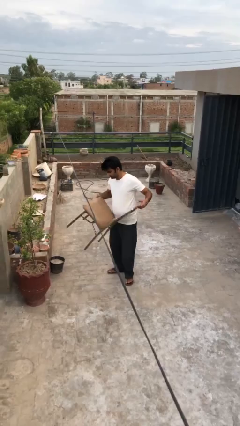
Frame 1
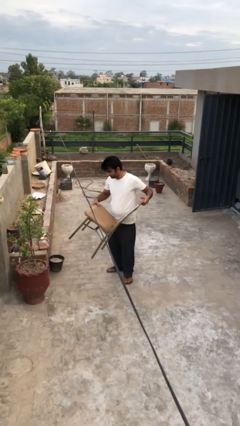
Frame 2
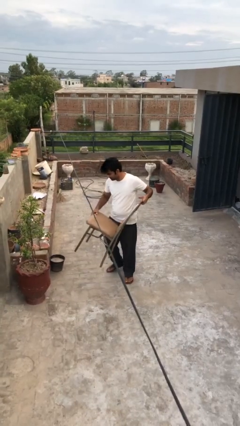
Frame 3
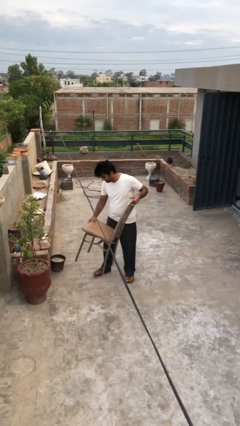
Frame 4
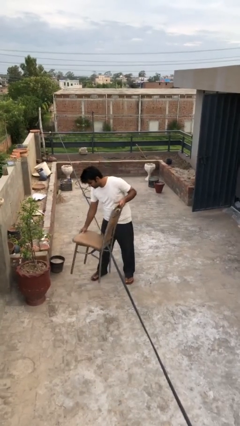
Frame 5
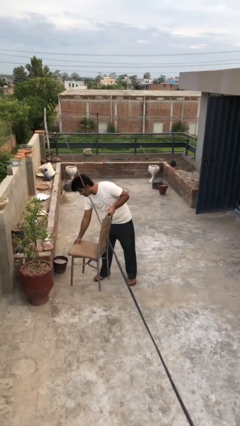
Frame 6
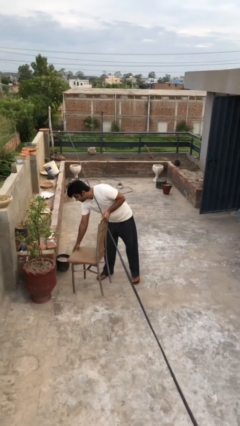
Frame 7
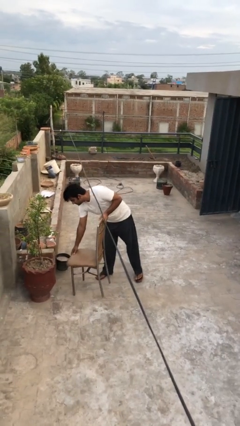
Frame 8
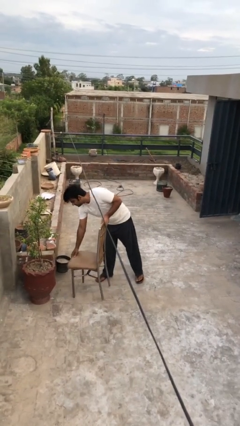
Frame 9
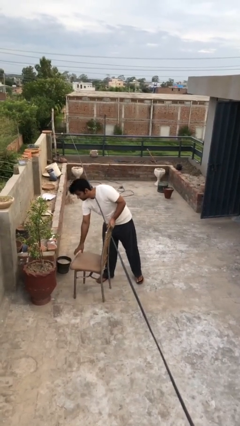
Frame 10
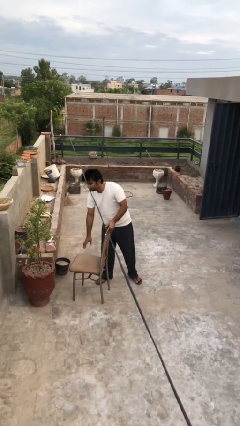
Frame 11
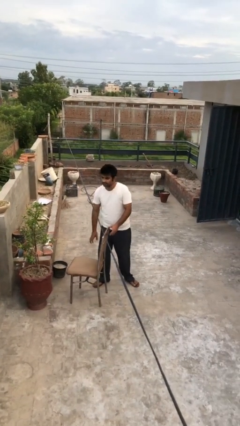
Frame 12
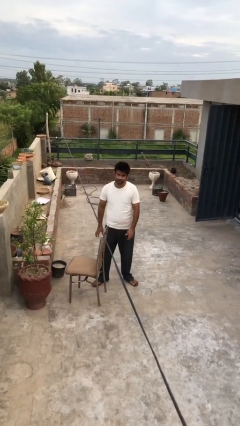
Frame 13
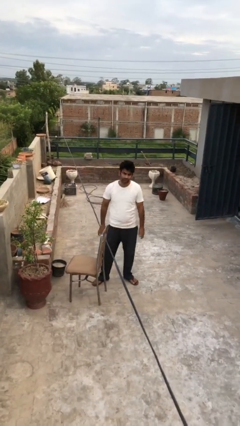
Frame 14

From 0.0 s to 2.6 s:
person puts down object on floor

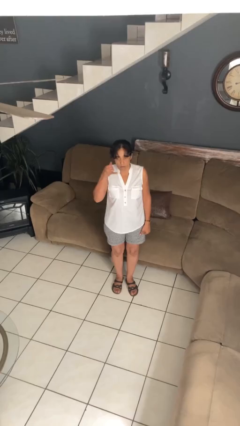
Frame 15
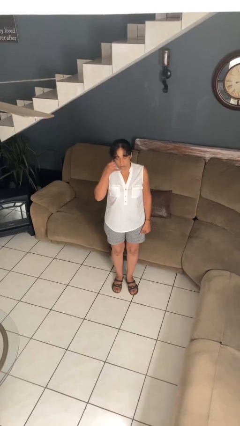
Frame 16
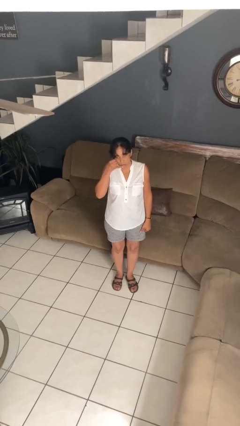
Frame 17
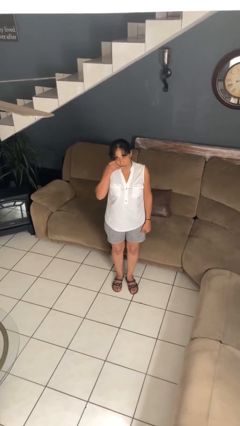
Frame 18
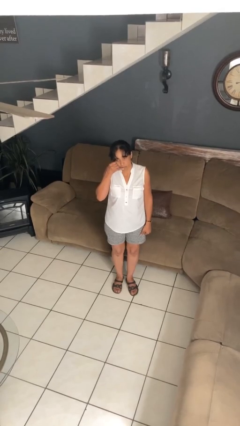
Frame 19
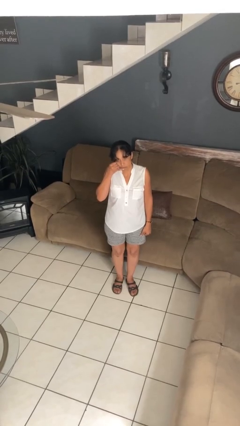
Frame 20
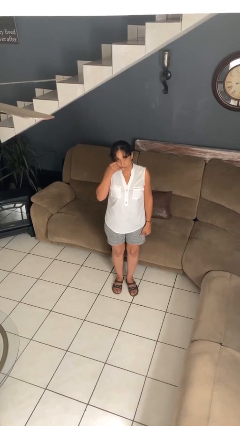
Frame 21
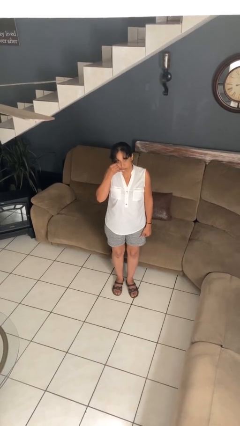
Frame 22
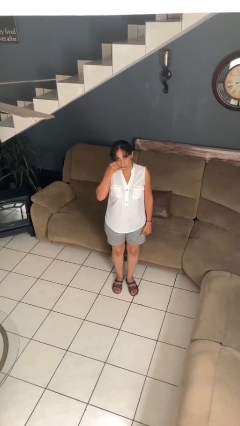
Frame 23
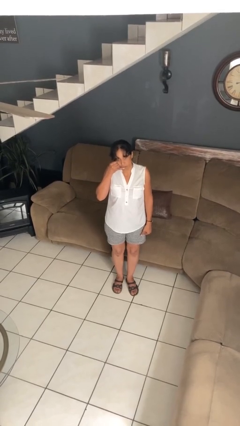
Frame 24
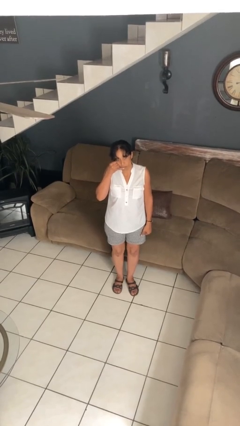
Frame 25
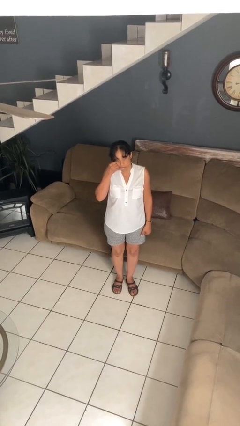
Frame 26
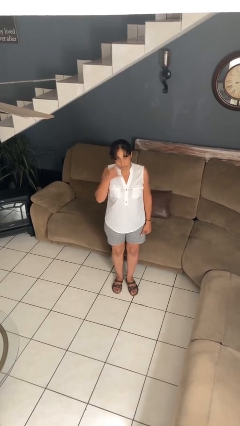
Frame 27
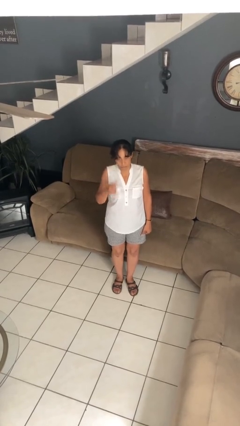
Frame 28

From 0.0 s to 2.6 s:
person gestures call me

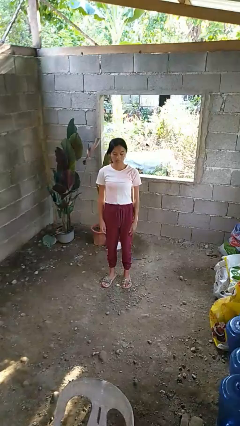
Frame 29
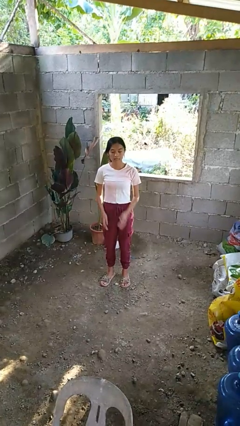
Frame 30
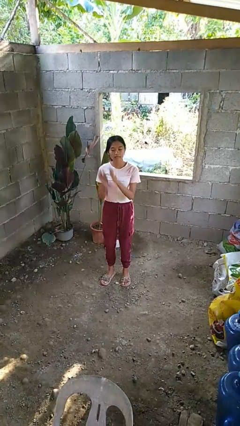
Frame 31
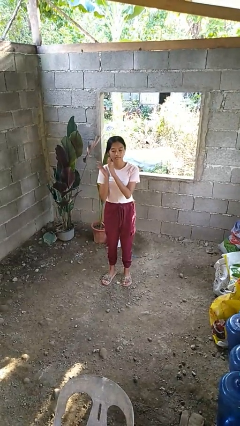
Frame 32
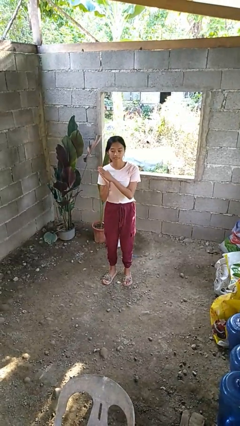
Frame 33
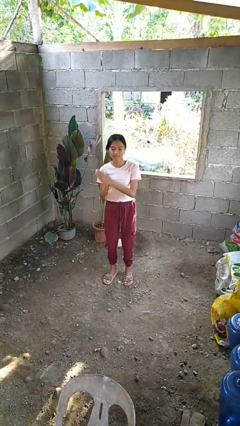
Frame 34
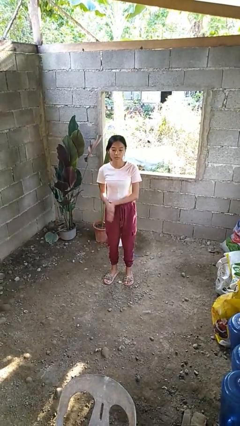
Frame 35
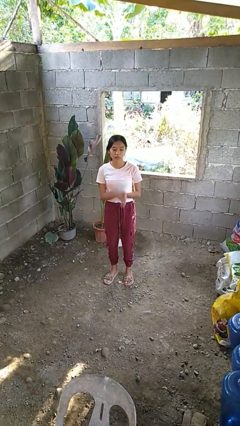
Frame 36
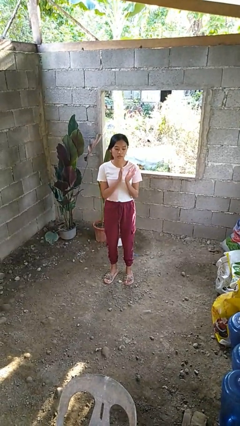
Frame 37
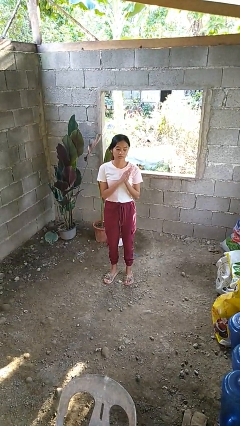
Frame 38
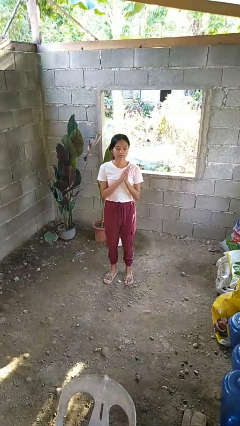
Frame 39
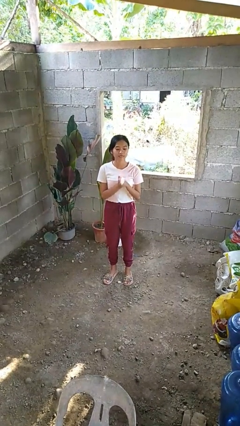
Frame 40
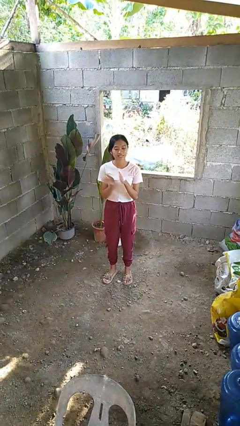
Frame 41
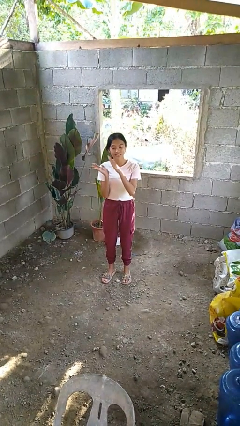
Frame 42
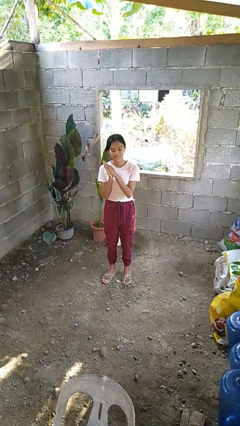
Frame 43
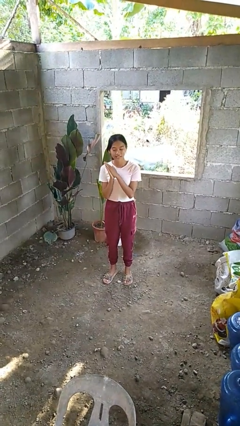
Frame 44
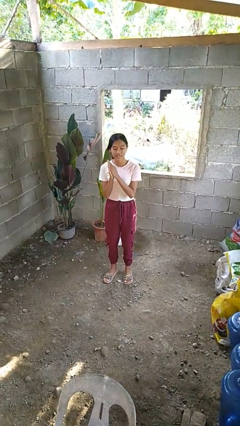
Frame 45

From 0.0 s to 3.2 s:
person dances in place

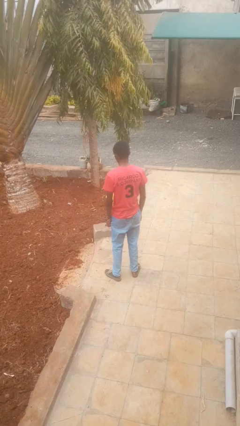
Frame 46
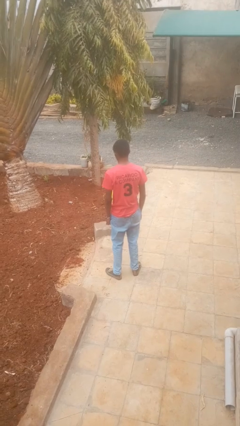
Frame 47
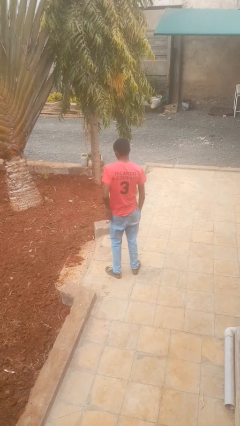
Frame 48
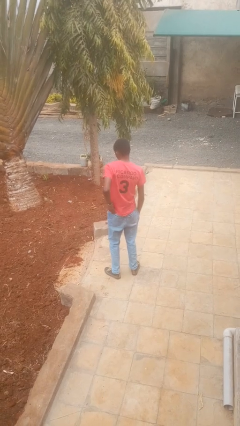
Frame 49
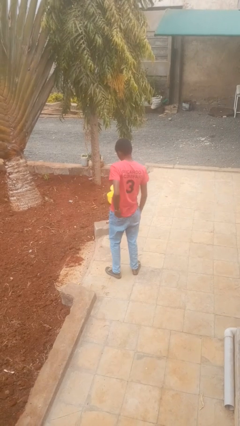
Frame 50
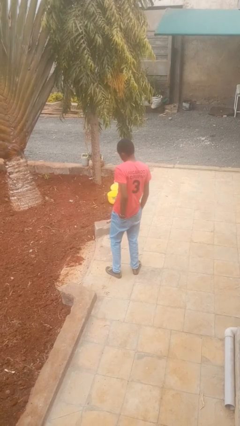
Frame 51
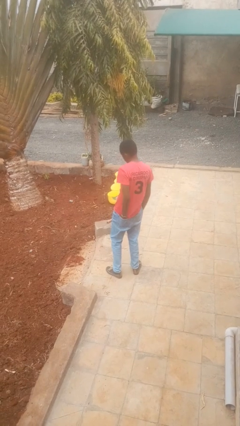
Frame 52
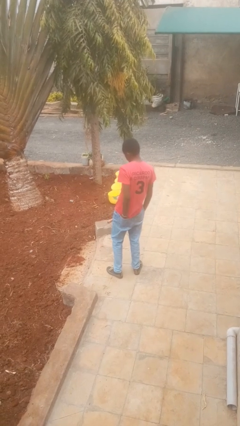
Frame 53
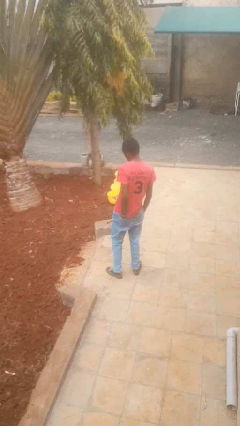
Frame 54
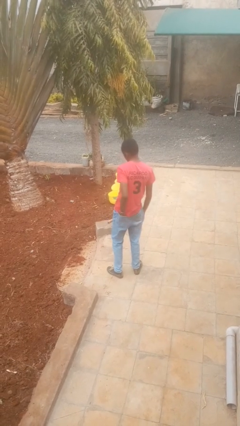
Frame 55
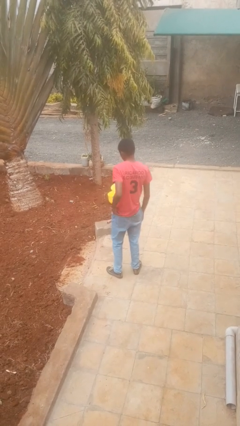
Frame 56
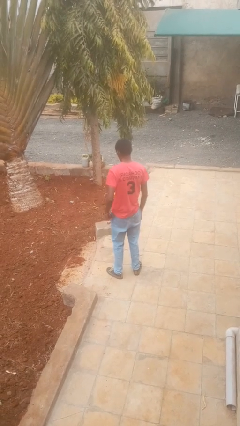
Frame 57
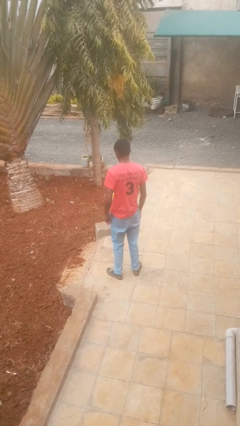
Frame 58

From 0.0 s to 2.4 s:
person puts hands in back pockets

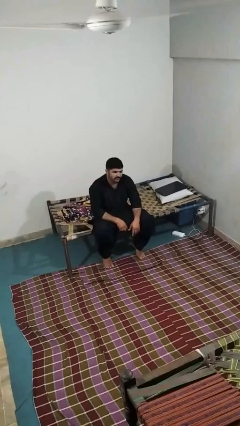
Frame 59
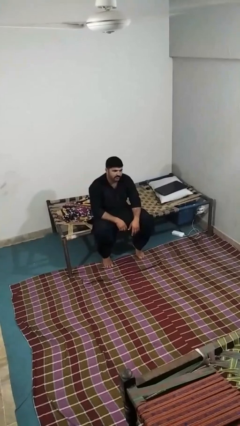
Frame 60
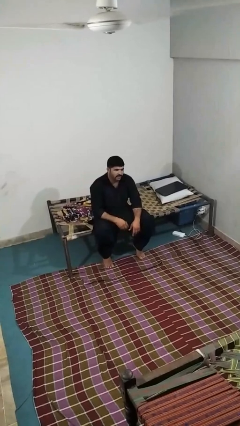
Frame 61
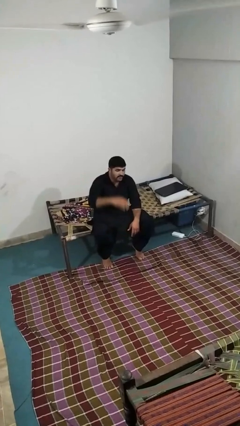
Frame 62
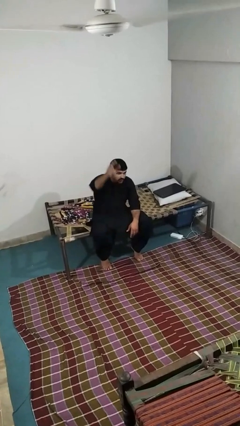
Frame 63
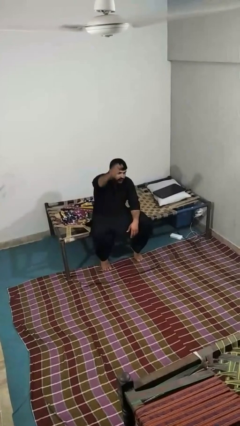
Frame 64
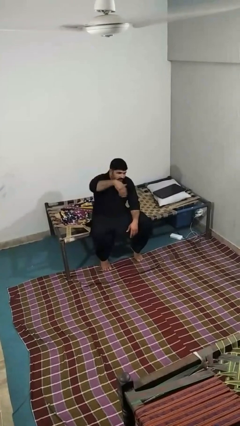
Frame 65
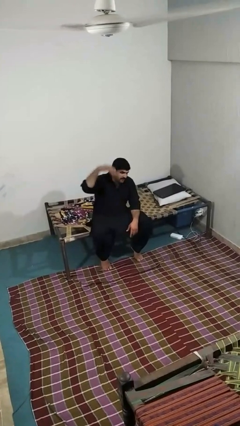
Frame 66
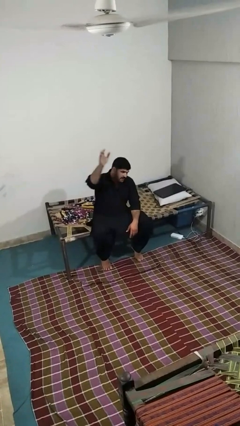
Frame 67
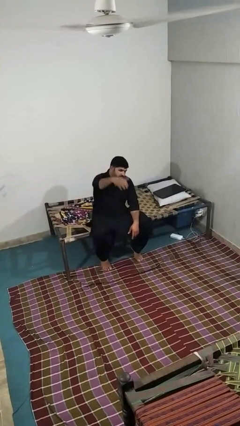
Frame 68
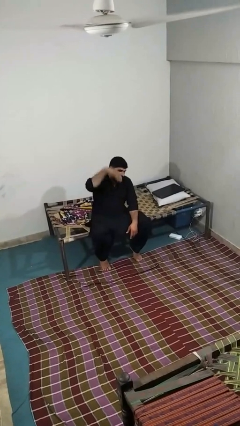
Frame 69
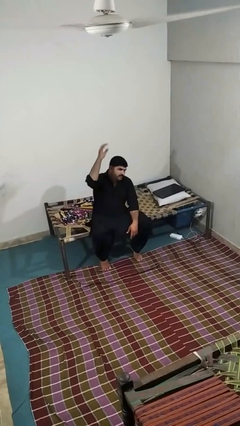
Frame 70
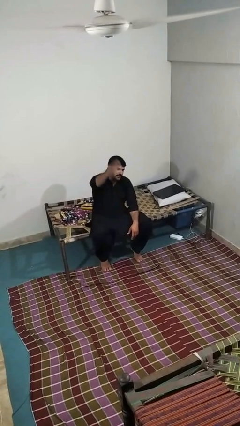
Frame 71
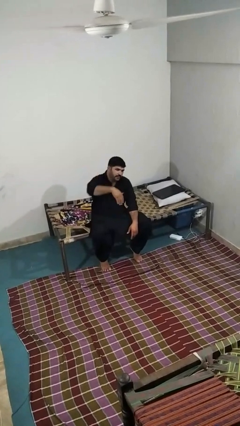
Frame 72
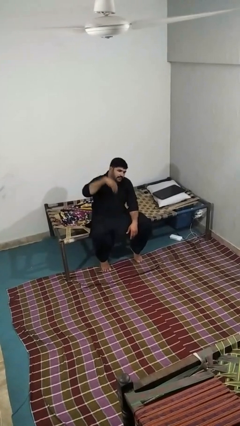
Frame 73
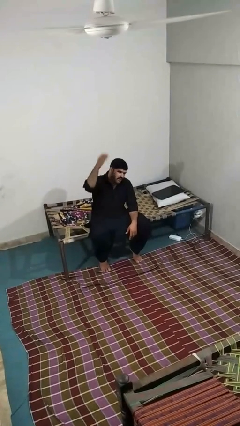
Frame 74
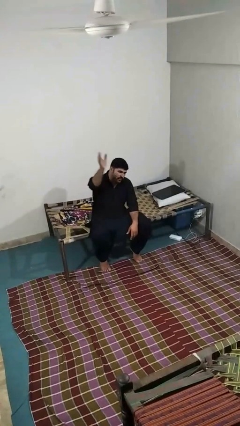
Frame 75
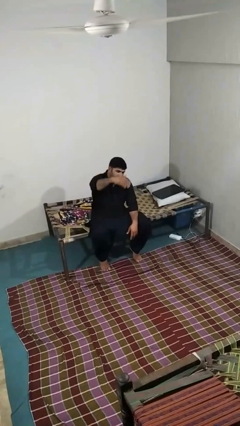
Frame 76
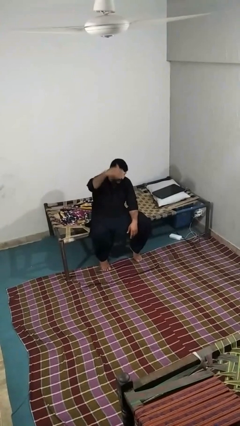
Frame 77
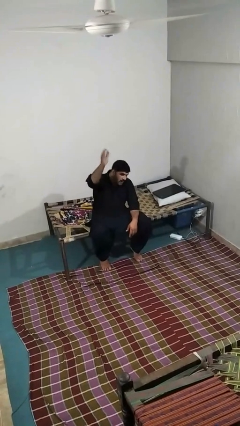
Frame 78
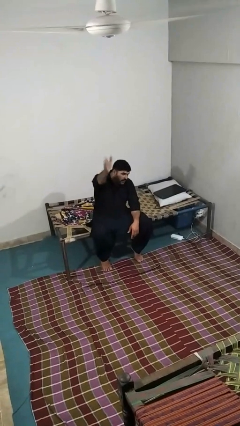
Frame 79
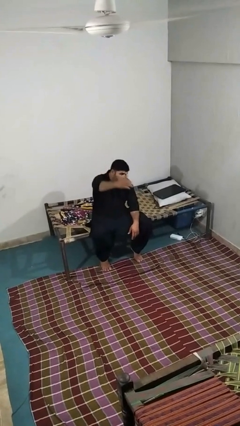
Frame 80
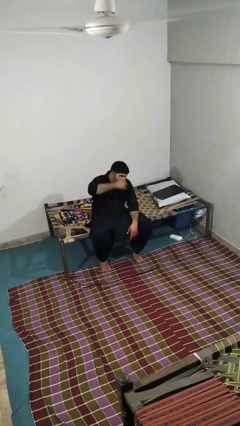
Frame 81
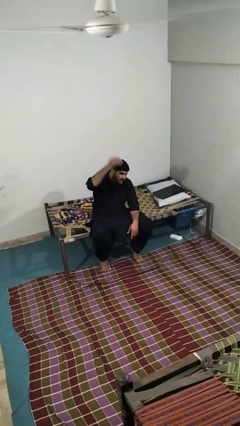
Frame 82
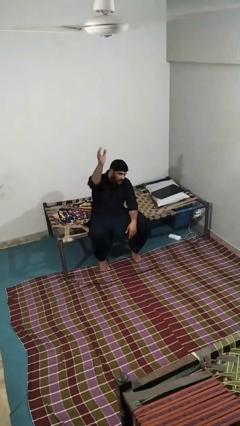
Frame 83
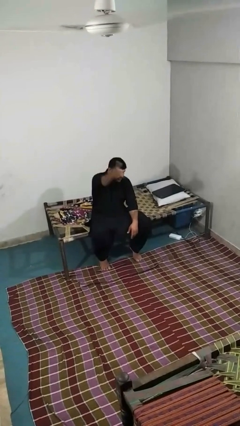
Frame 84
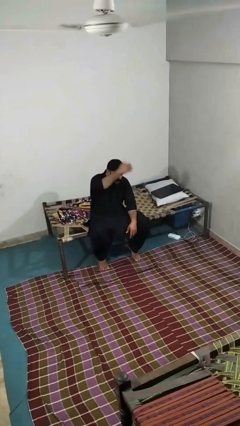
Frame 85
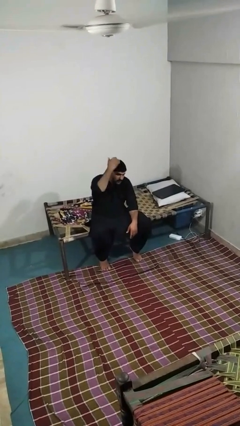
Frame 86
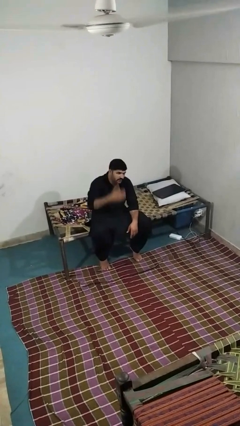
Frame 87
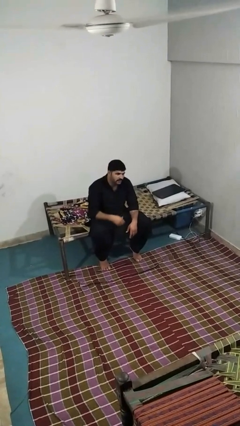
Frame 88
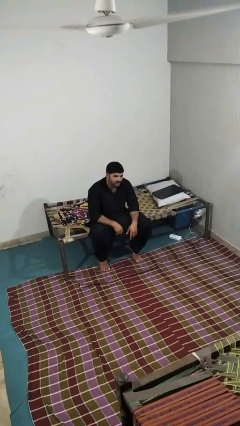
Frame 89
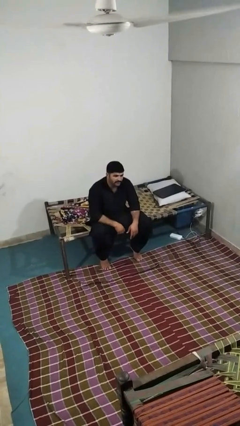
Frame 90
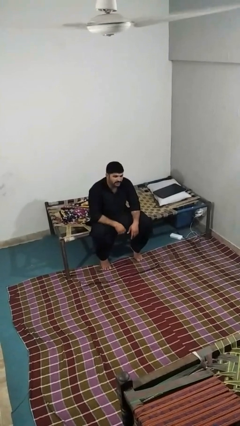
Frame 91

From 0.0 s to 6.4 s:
person gestures come here
